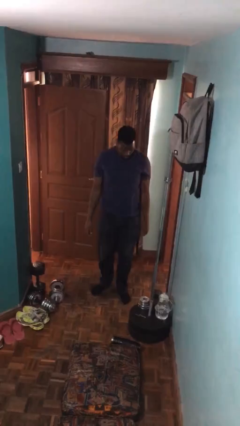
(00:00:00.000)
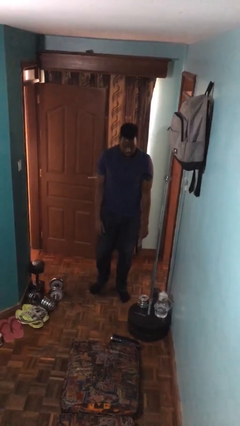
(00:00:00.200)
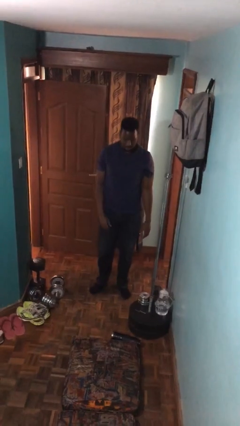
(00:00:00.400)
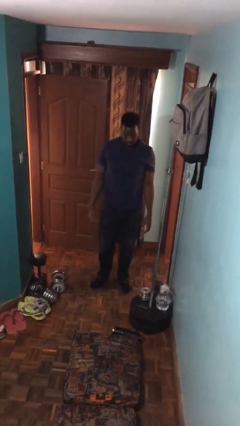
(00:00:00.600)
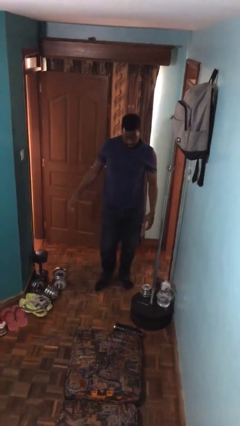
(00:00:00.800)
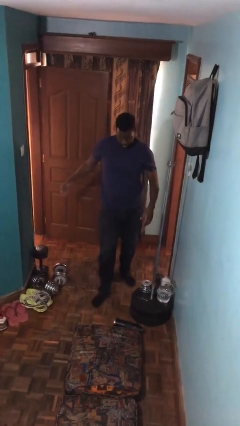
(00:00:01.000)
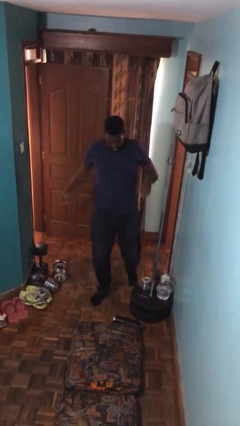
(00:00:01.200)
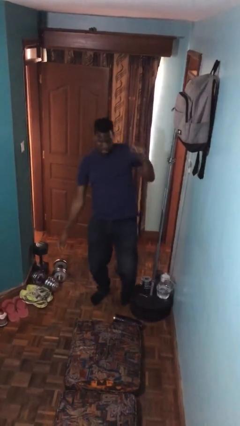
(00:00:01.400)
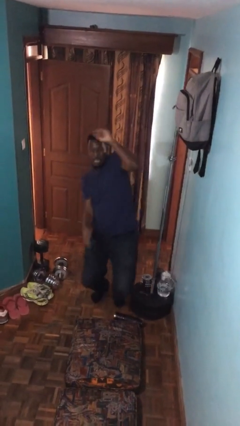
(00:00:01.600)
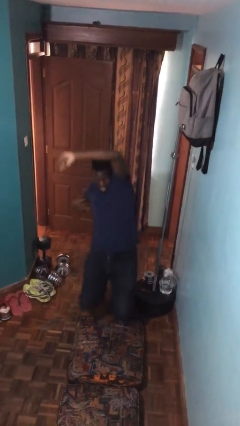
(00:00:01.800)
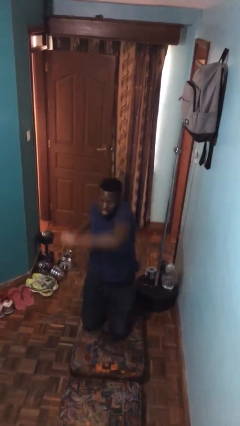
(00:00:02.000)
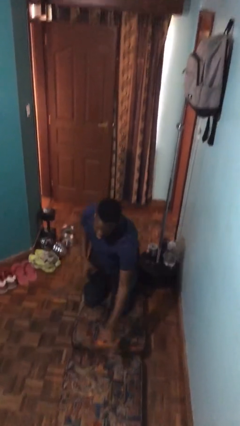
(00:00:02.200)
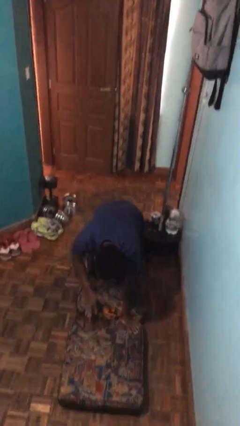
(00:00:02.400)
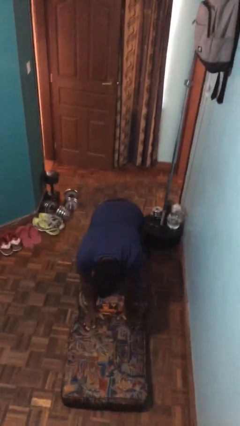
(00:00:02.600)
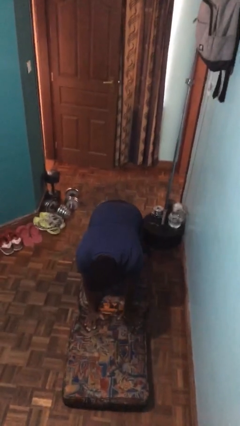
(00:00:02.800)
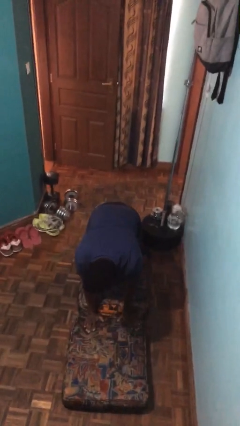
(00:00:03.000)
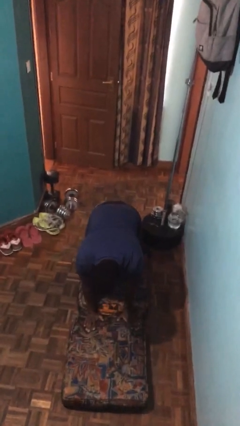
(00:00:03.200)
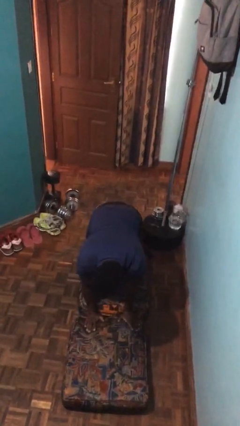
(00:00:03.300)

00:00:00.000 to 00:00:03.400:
person trips on object on floor

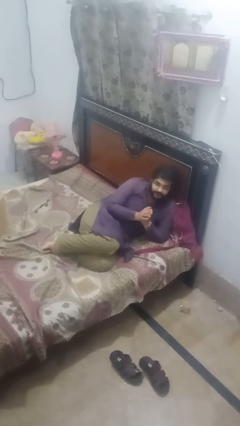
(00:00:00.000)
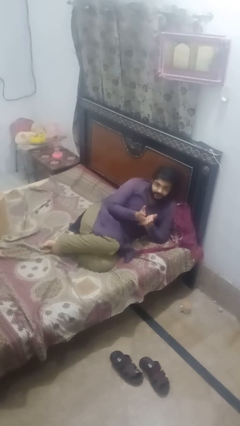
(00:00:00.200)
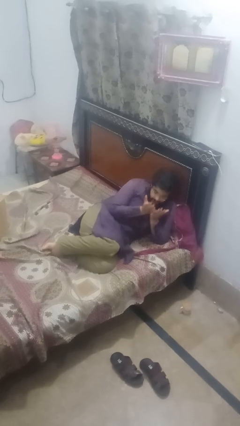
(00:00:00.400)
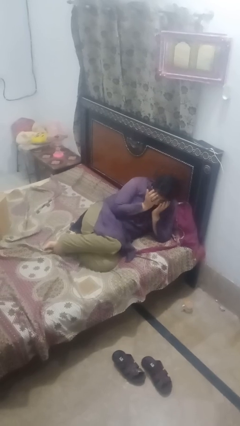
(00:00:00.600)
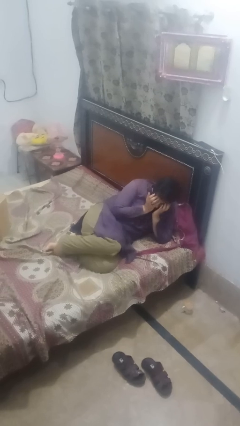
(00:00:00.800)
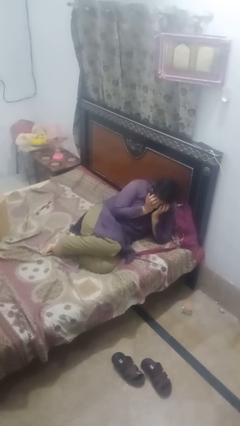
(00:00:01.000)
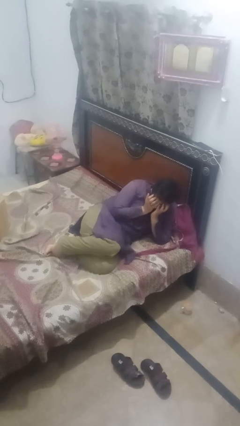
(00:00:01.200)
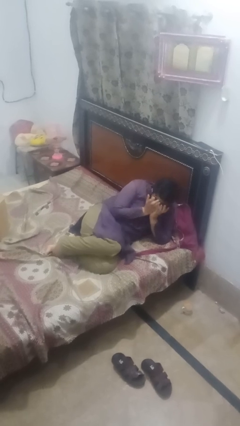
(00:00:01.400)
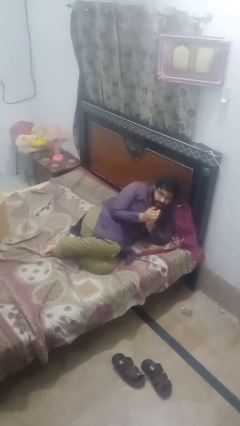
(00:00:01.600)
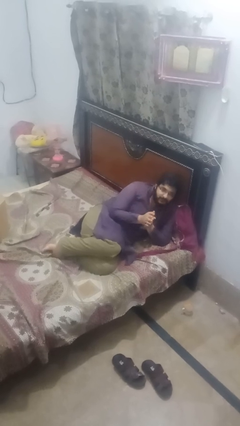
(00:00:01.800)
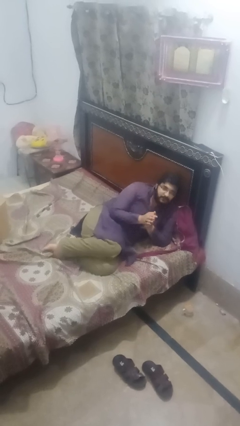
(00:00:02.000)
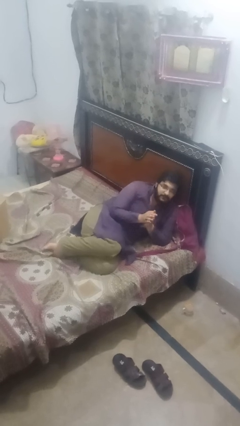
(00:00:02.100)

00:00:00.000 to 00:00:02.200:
person covers face with hands

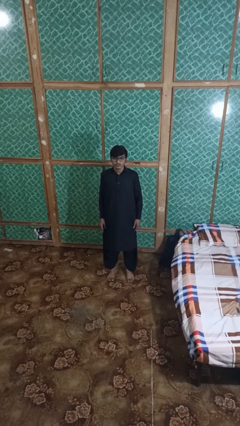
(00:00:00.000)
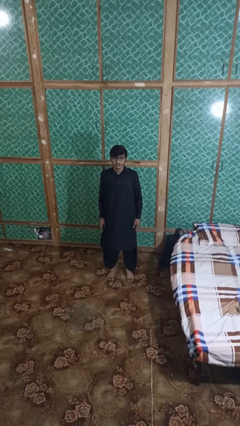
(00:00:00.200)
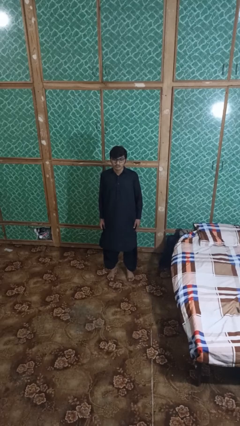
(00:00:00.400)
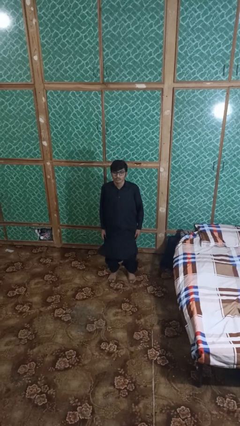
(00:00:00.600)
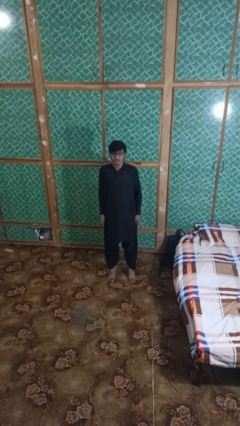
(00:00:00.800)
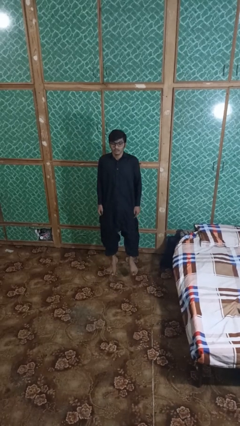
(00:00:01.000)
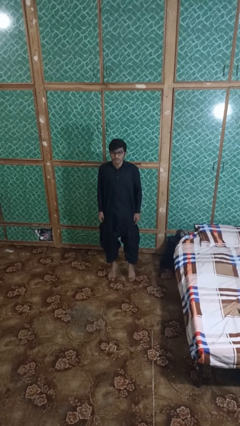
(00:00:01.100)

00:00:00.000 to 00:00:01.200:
person jumps

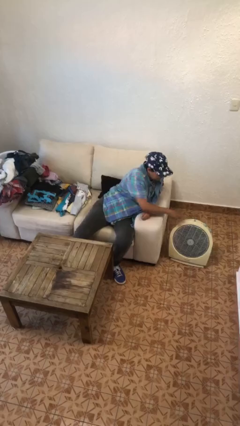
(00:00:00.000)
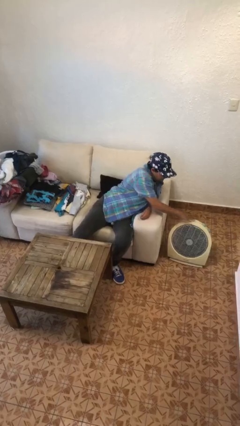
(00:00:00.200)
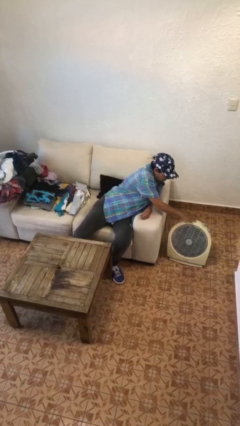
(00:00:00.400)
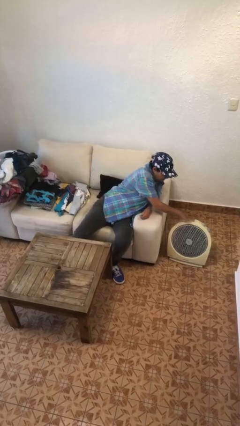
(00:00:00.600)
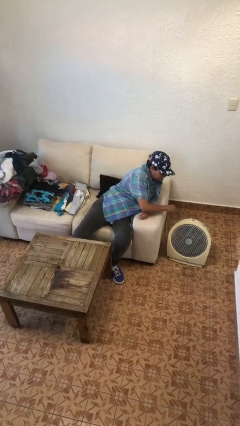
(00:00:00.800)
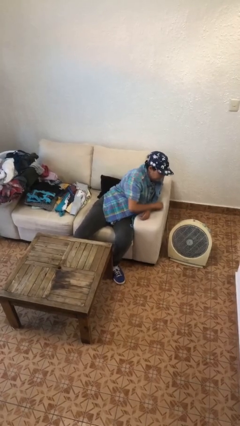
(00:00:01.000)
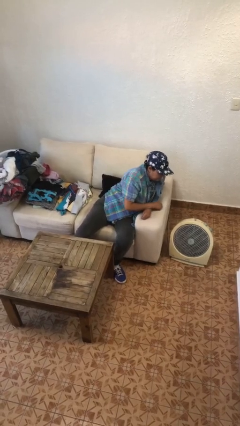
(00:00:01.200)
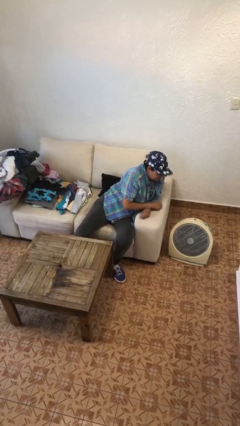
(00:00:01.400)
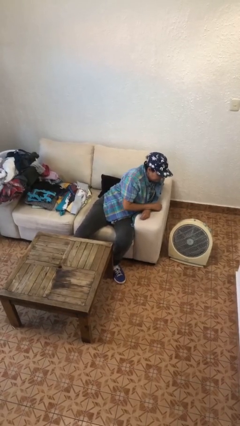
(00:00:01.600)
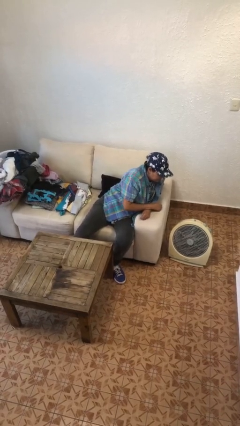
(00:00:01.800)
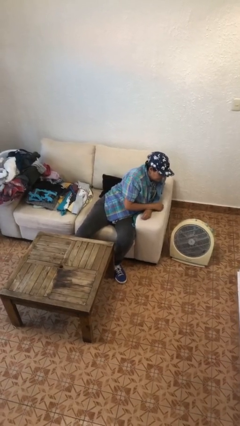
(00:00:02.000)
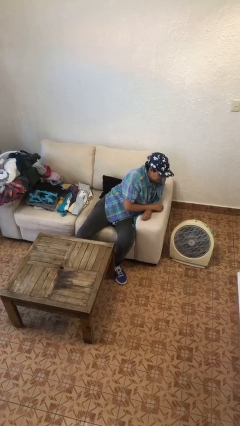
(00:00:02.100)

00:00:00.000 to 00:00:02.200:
person turns on fan

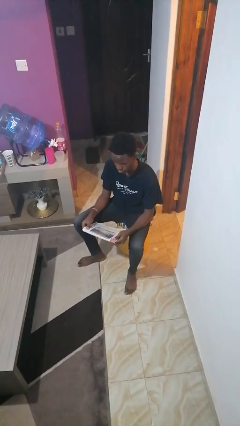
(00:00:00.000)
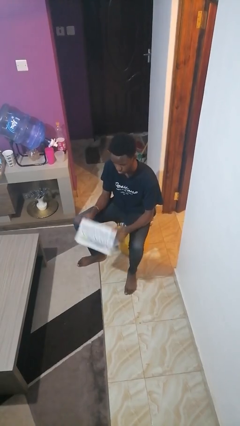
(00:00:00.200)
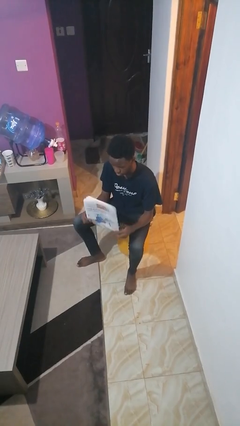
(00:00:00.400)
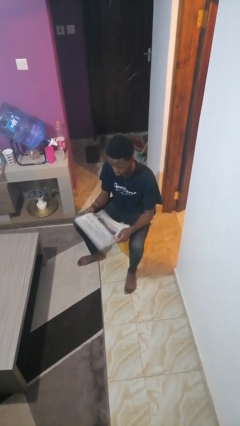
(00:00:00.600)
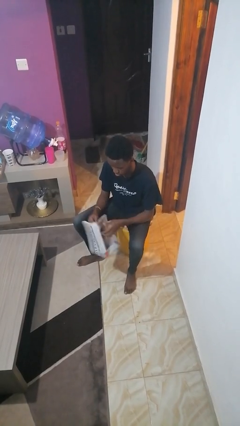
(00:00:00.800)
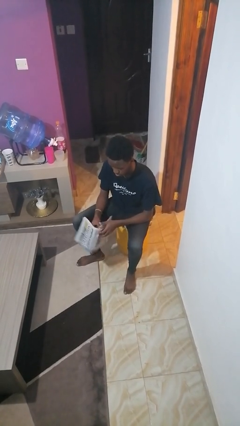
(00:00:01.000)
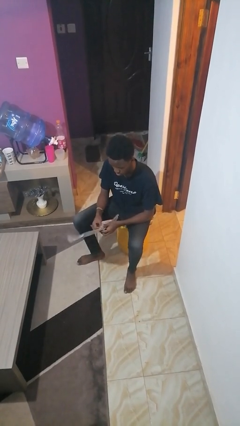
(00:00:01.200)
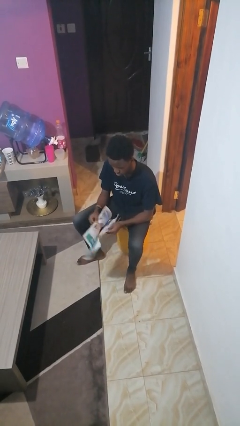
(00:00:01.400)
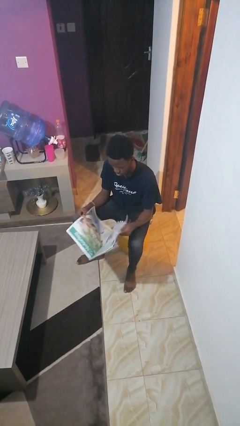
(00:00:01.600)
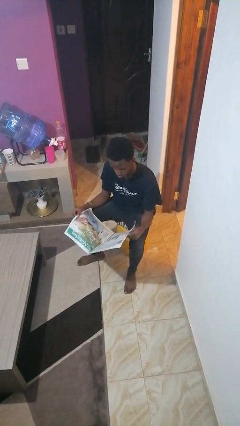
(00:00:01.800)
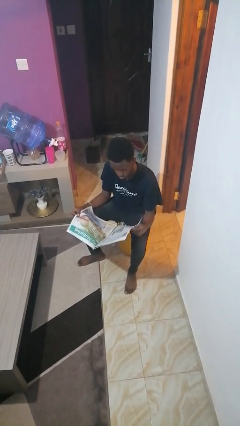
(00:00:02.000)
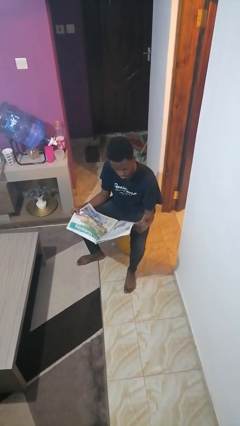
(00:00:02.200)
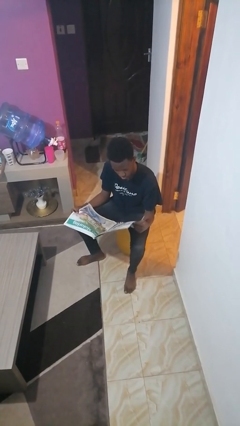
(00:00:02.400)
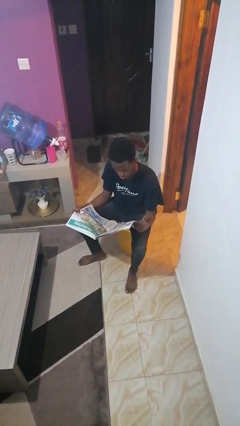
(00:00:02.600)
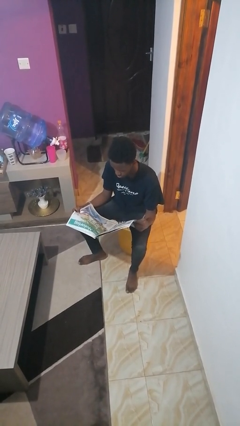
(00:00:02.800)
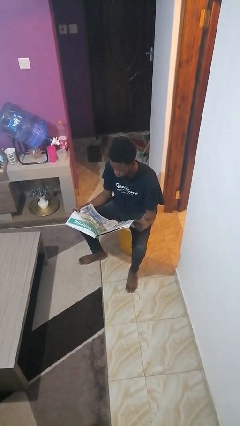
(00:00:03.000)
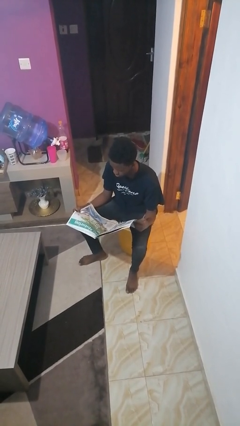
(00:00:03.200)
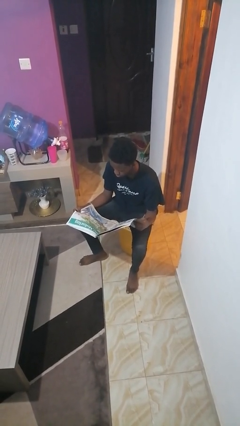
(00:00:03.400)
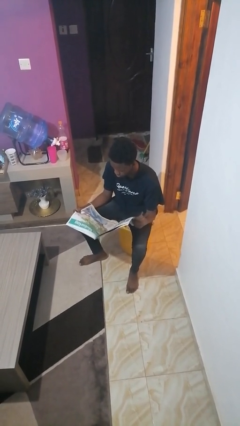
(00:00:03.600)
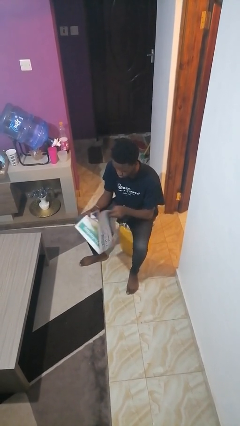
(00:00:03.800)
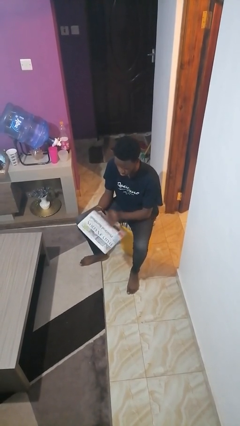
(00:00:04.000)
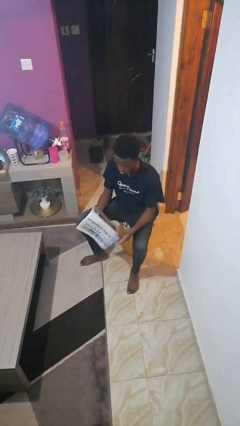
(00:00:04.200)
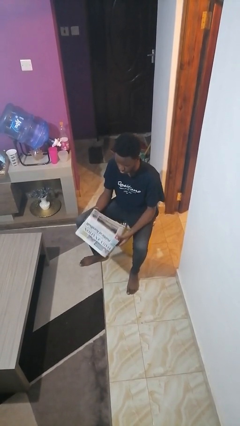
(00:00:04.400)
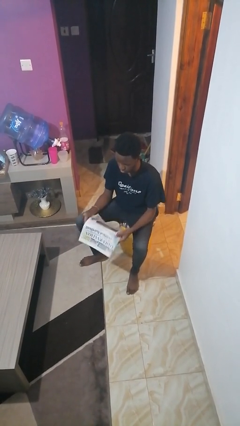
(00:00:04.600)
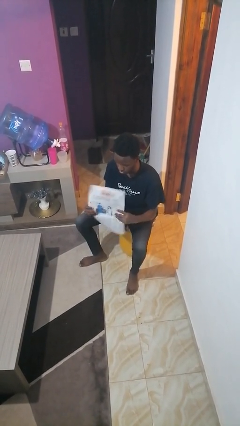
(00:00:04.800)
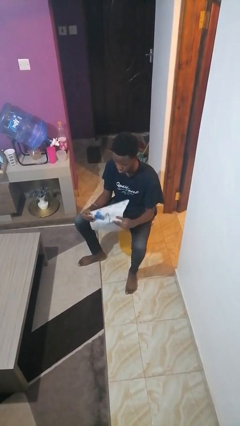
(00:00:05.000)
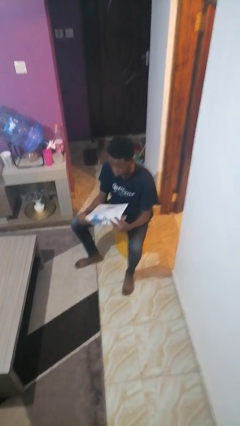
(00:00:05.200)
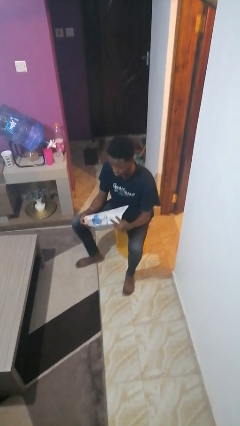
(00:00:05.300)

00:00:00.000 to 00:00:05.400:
person reads newspaper

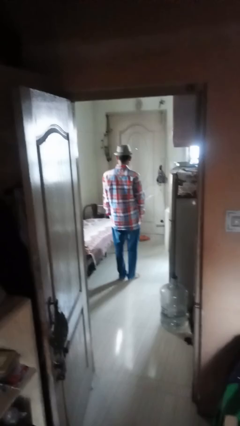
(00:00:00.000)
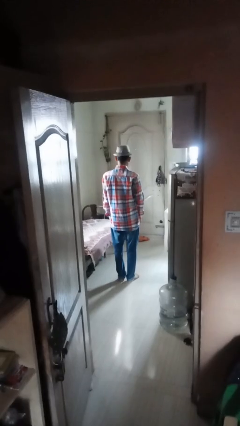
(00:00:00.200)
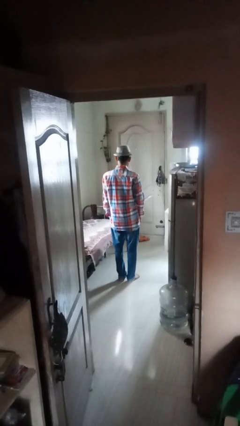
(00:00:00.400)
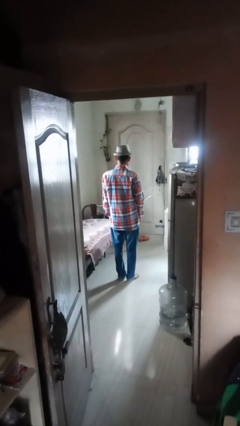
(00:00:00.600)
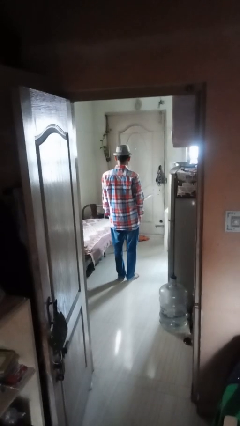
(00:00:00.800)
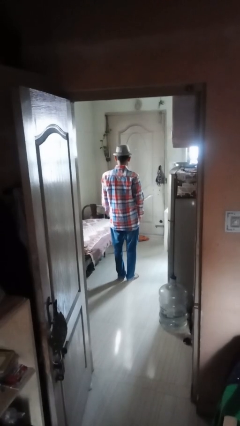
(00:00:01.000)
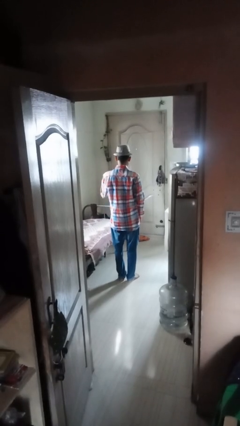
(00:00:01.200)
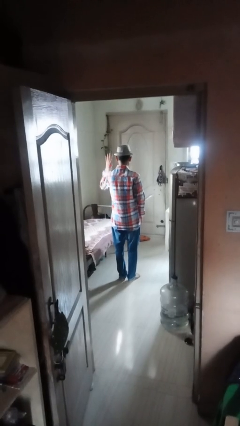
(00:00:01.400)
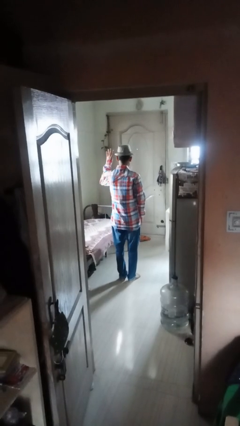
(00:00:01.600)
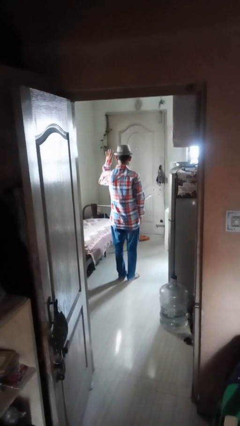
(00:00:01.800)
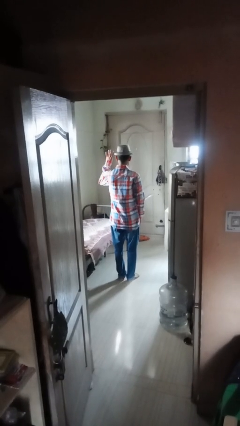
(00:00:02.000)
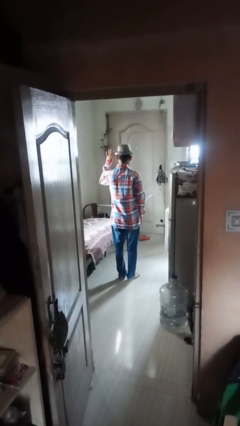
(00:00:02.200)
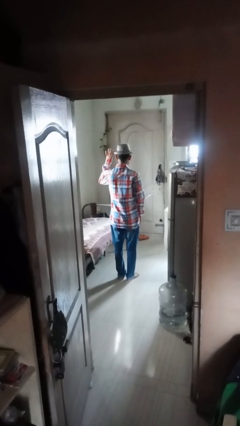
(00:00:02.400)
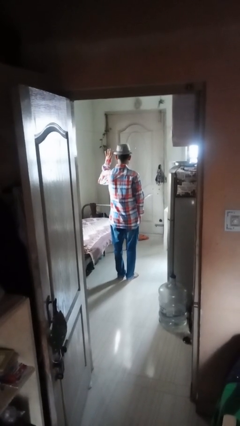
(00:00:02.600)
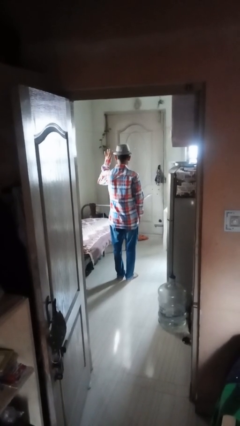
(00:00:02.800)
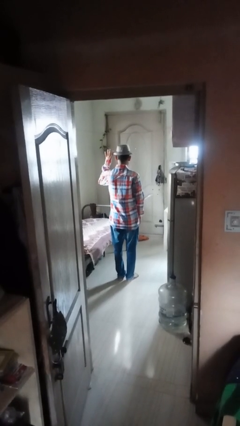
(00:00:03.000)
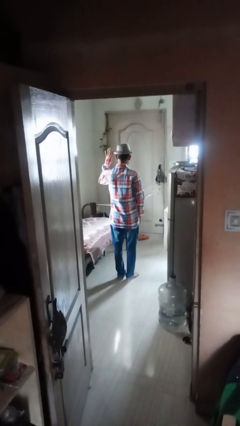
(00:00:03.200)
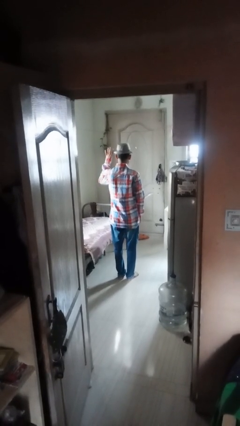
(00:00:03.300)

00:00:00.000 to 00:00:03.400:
person gestures number four
